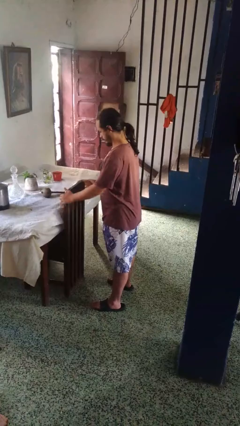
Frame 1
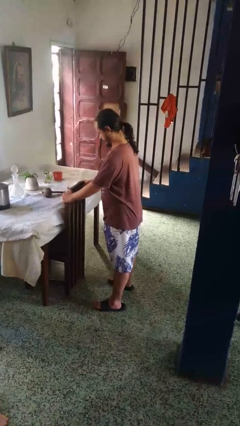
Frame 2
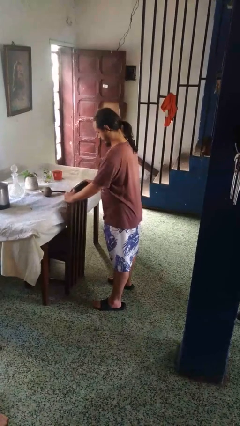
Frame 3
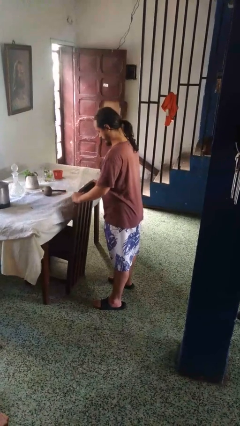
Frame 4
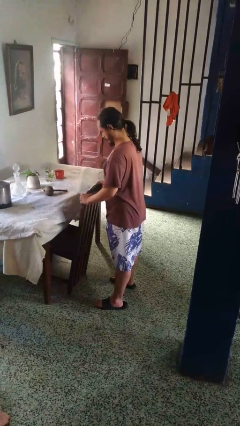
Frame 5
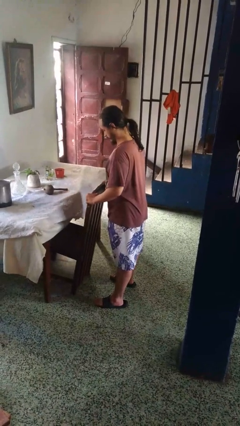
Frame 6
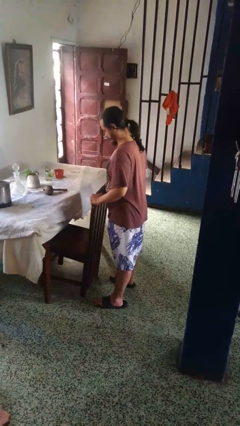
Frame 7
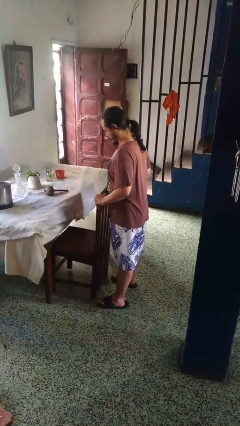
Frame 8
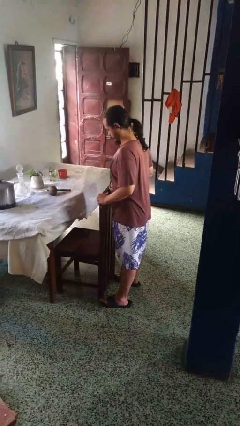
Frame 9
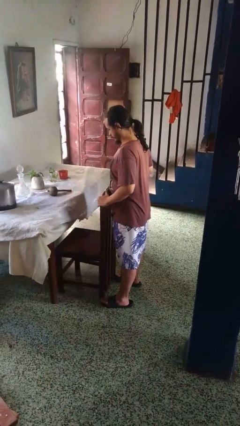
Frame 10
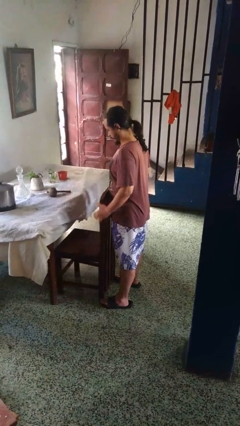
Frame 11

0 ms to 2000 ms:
person pulls out chair

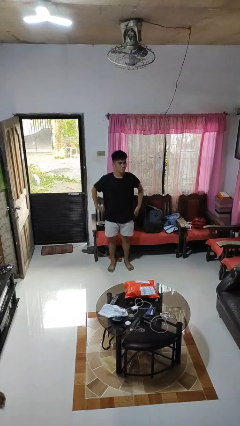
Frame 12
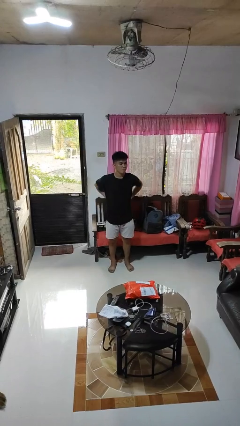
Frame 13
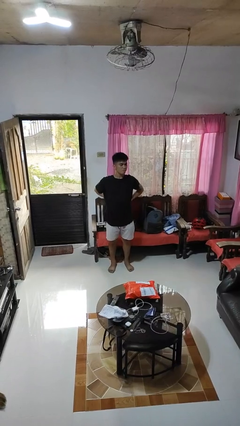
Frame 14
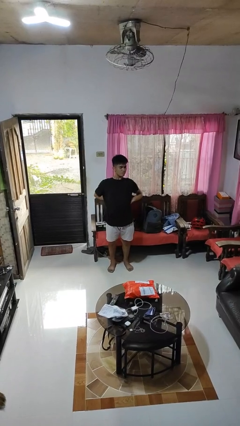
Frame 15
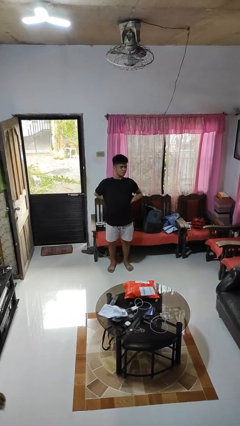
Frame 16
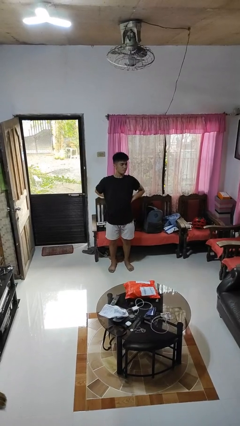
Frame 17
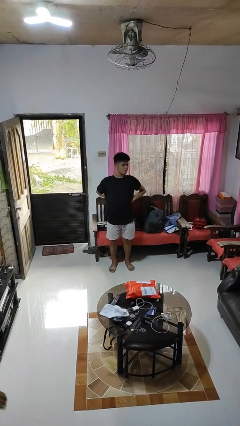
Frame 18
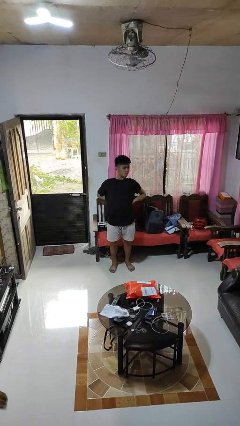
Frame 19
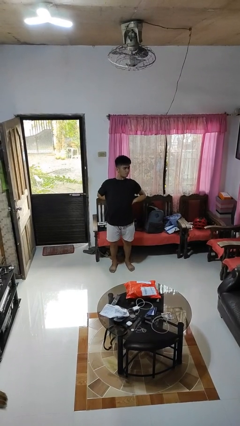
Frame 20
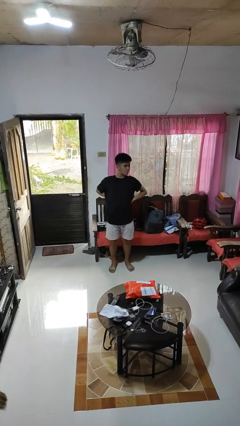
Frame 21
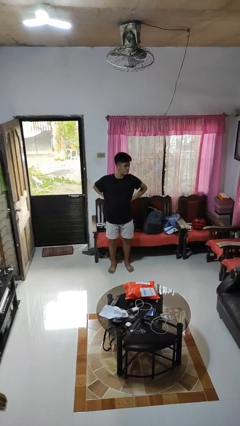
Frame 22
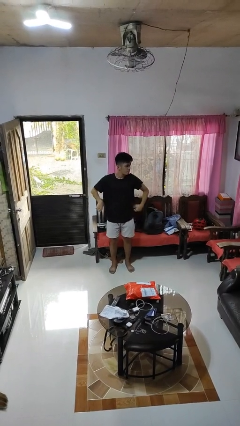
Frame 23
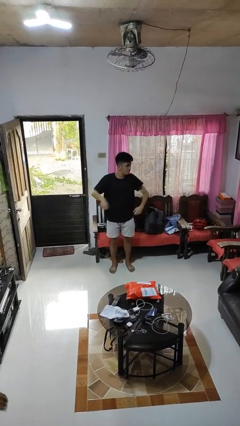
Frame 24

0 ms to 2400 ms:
person stretches back

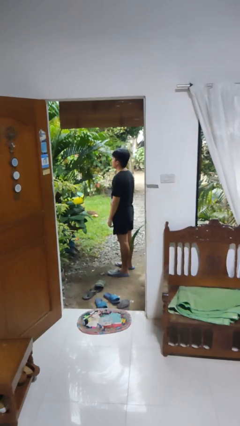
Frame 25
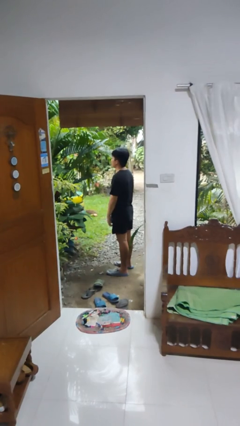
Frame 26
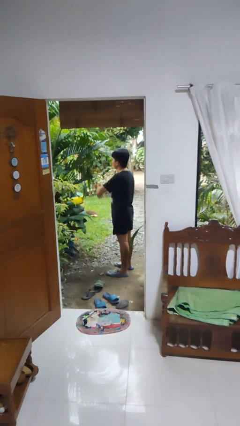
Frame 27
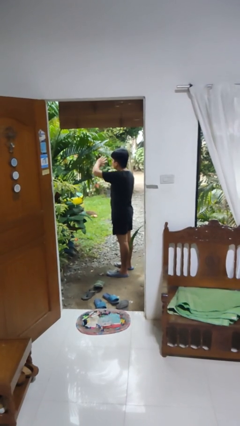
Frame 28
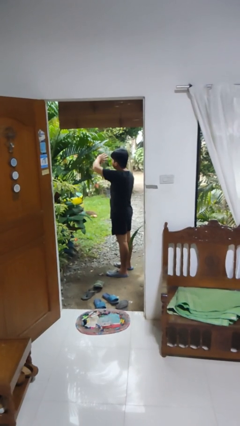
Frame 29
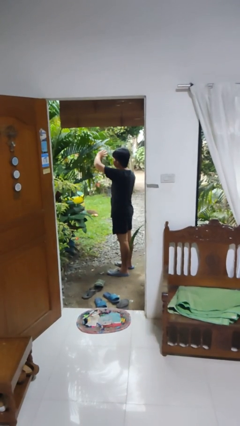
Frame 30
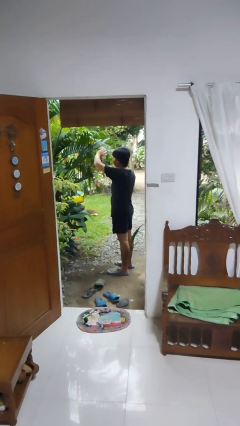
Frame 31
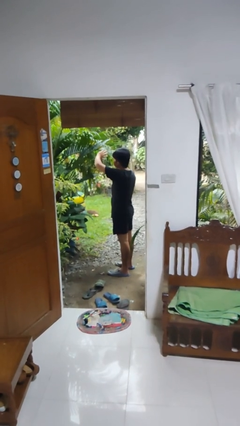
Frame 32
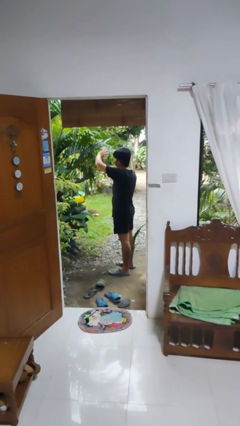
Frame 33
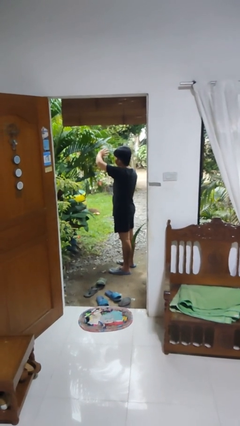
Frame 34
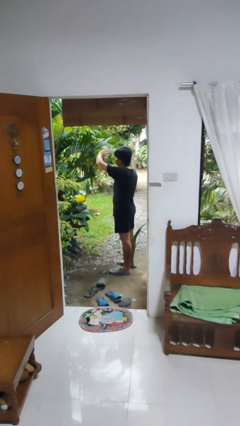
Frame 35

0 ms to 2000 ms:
person shades eyes

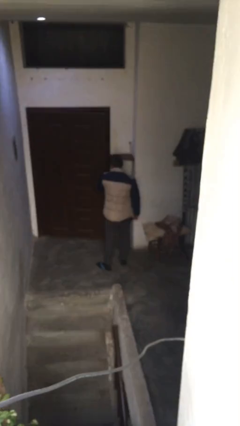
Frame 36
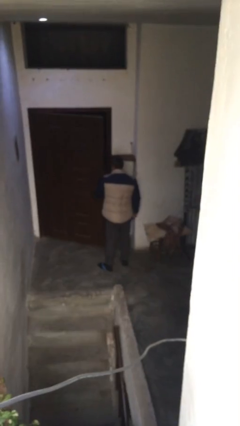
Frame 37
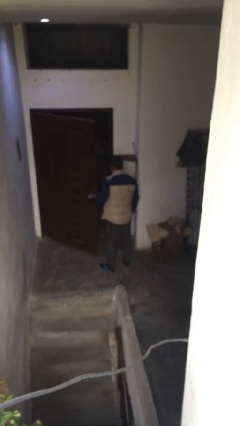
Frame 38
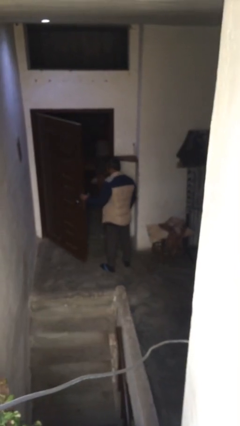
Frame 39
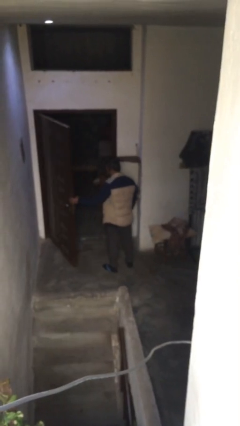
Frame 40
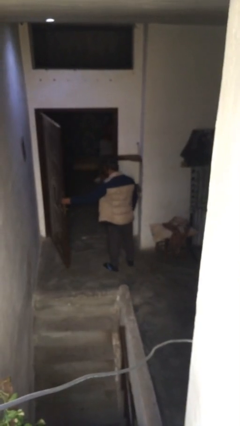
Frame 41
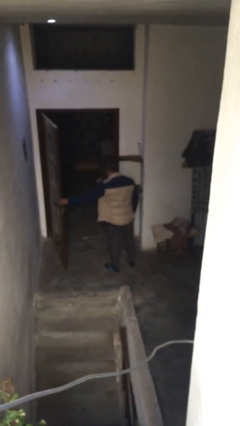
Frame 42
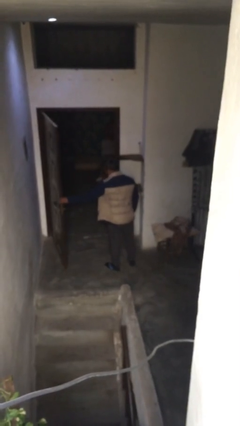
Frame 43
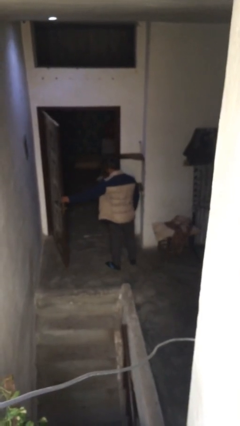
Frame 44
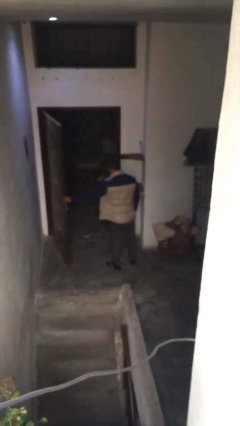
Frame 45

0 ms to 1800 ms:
person opens facility door

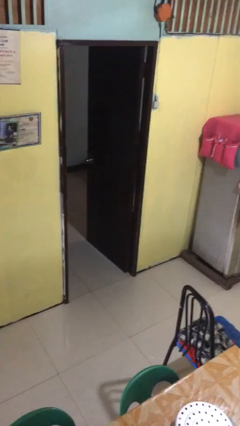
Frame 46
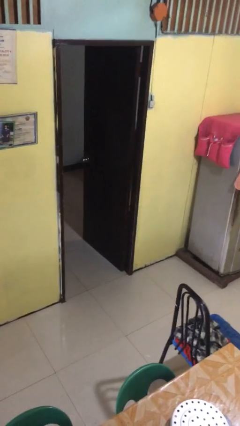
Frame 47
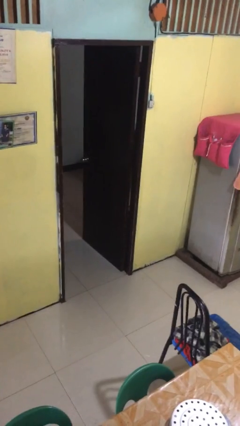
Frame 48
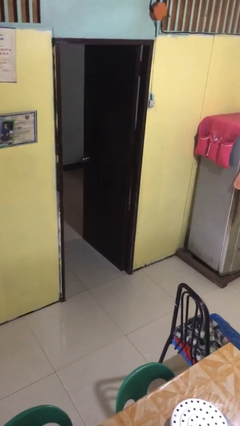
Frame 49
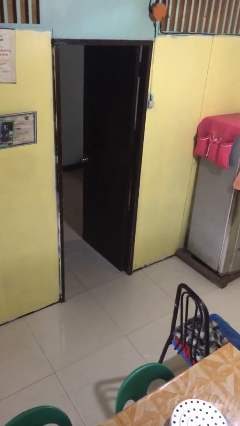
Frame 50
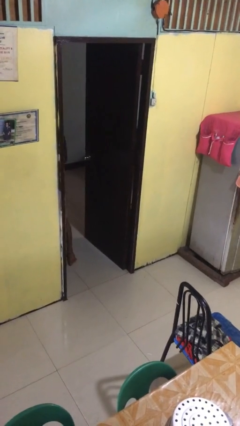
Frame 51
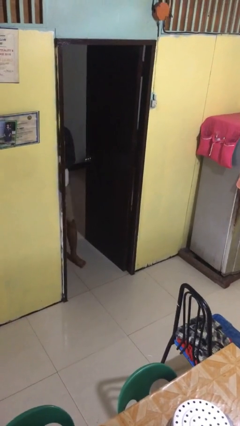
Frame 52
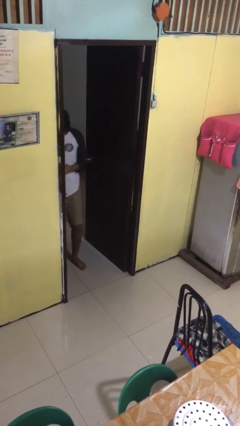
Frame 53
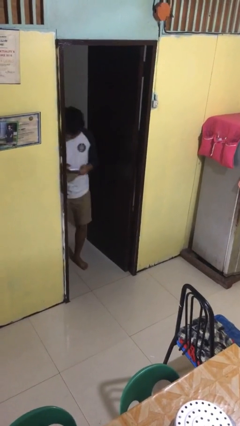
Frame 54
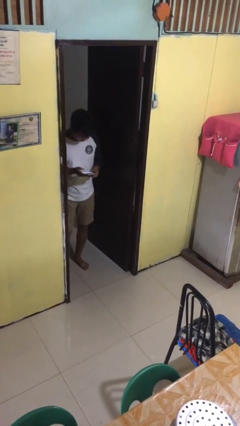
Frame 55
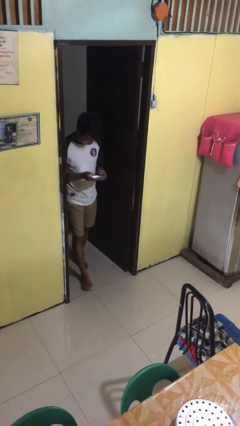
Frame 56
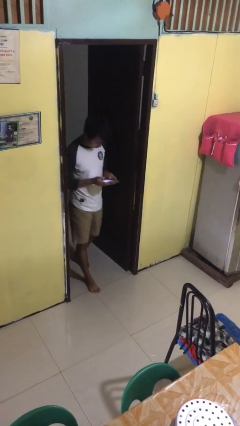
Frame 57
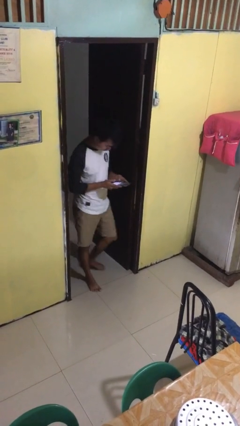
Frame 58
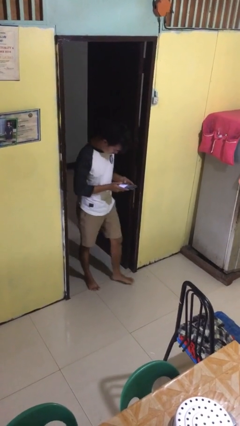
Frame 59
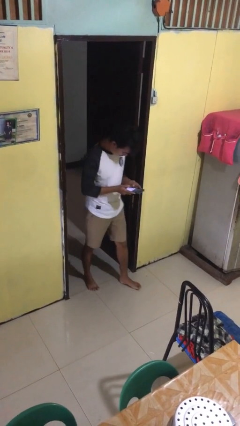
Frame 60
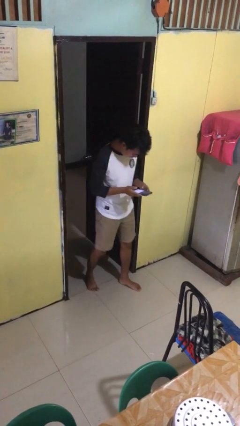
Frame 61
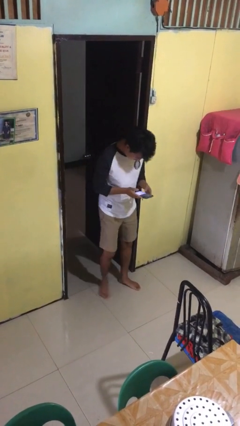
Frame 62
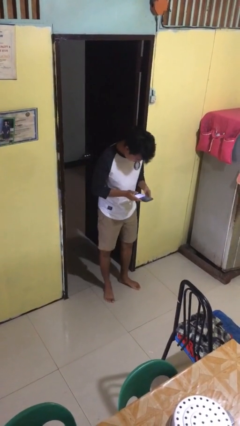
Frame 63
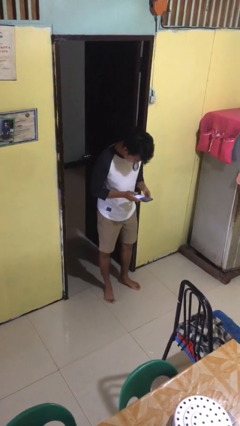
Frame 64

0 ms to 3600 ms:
person enters scene through structure

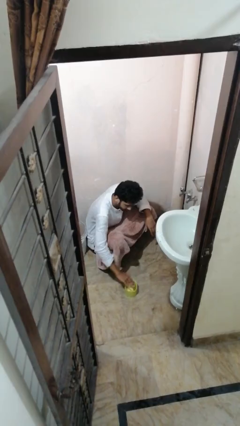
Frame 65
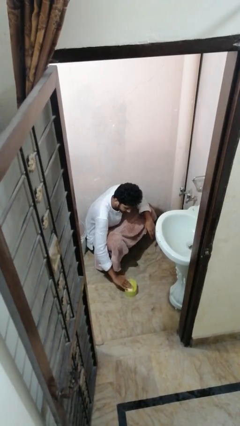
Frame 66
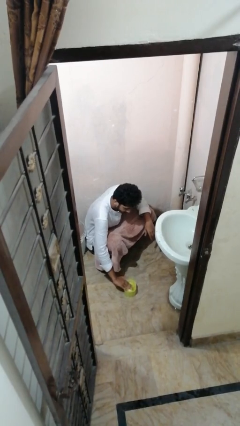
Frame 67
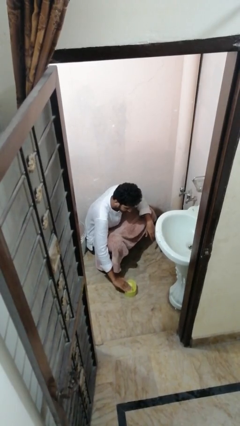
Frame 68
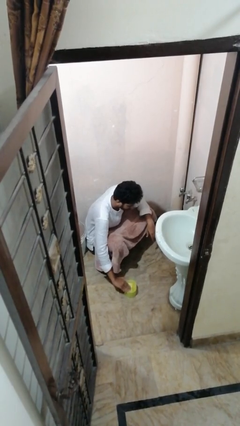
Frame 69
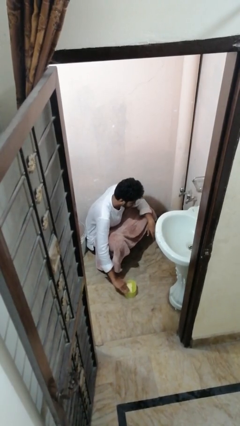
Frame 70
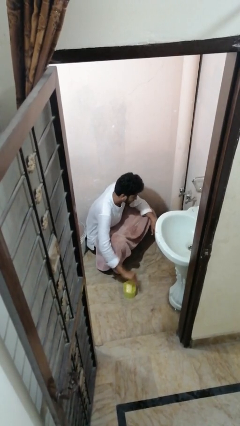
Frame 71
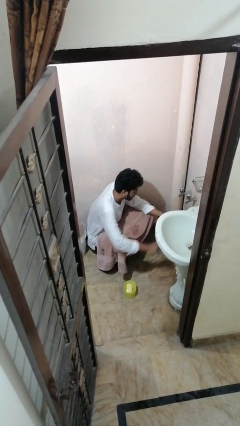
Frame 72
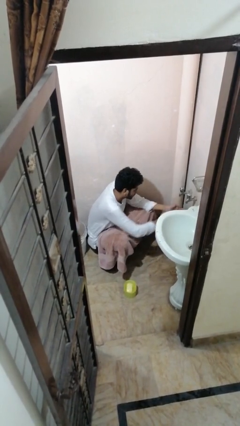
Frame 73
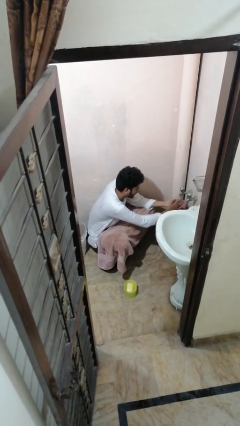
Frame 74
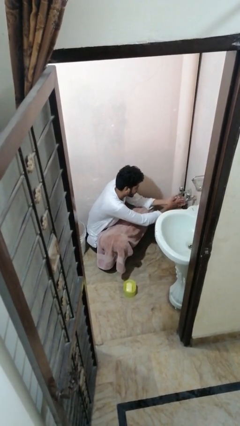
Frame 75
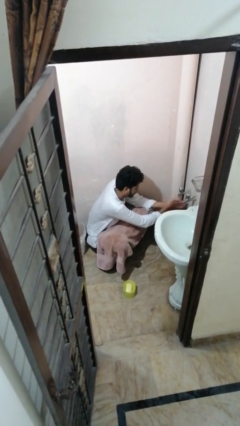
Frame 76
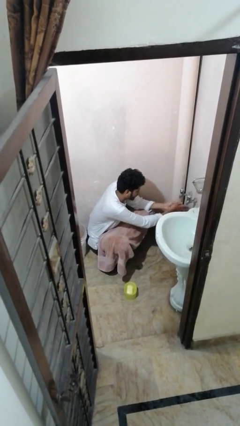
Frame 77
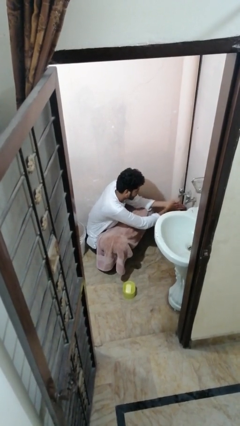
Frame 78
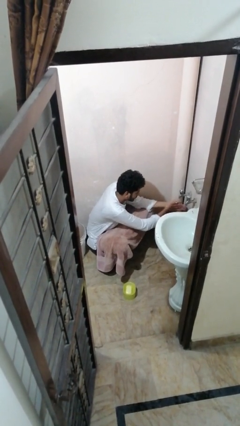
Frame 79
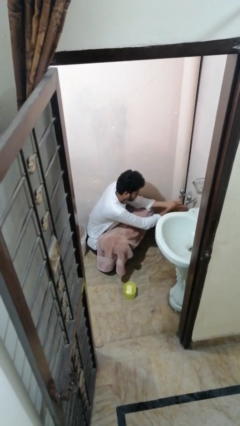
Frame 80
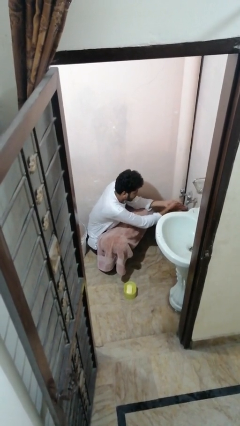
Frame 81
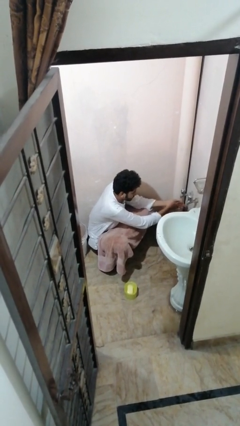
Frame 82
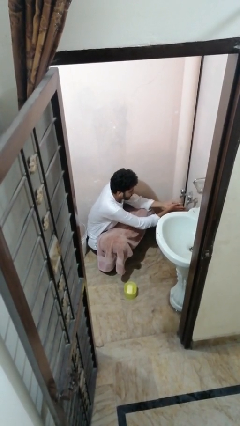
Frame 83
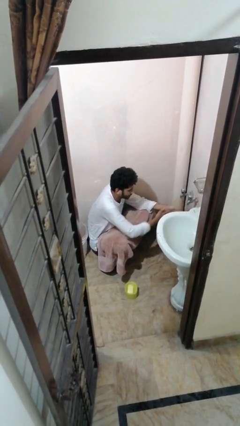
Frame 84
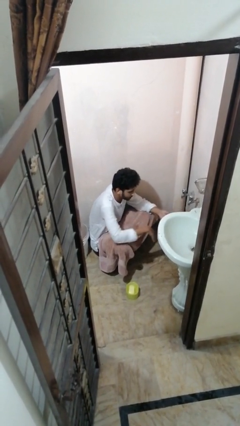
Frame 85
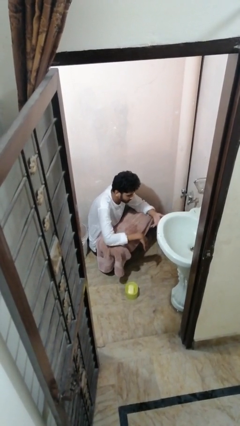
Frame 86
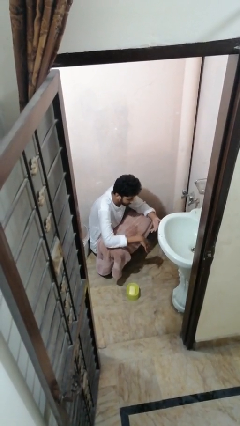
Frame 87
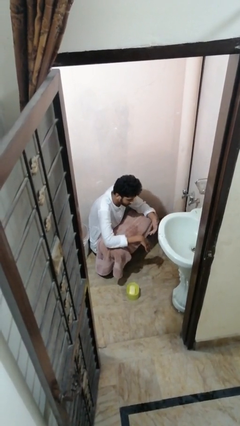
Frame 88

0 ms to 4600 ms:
person washes hands

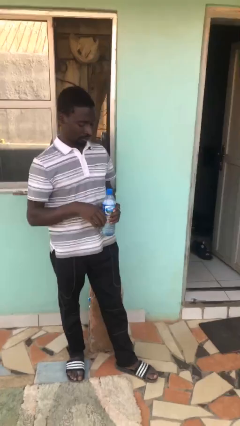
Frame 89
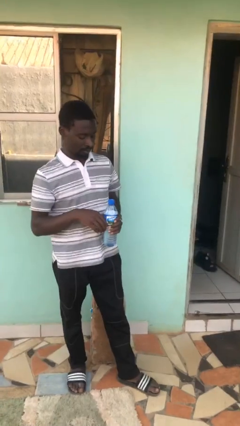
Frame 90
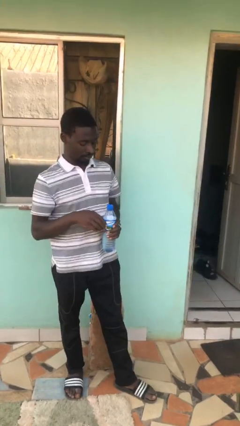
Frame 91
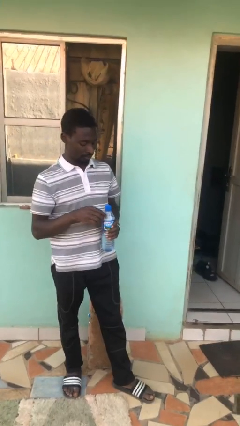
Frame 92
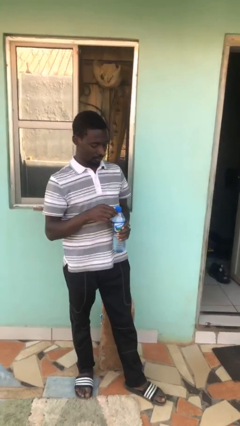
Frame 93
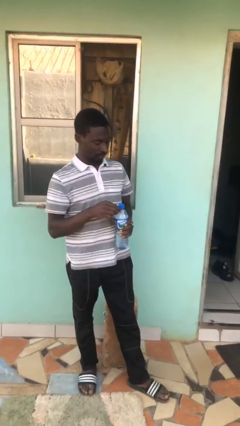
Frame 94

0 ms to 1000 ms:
person drinks from bottle
